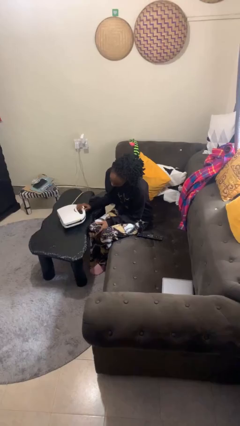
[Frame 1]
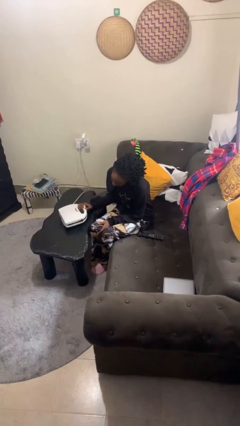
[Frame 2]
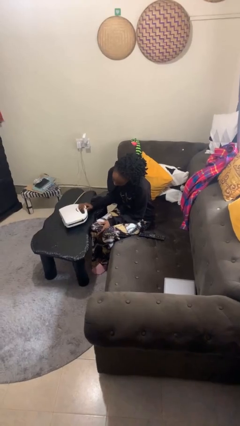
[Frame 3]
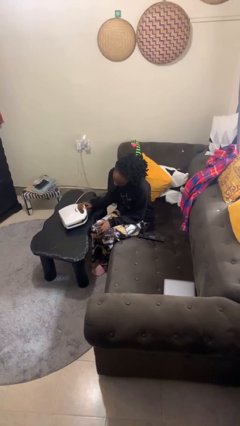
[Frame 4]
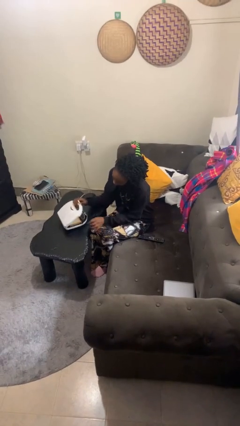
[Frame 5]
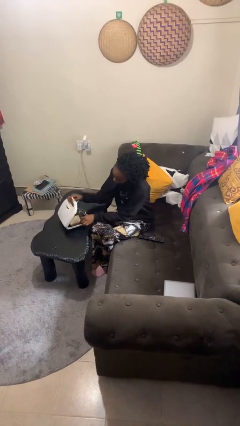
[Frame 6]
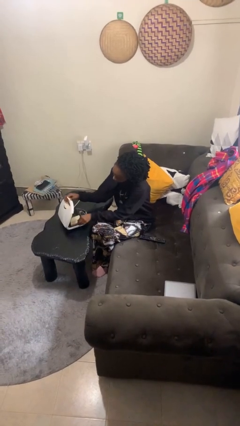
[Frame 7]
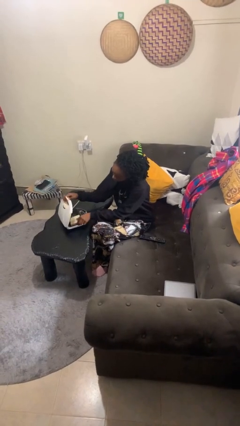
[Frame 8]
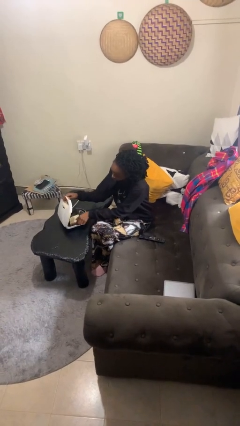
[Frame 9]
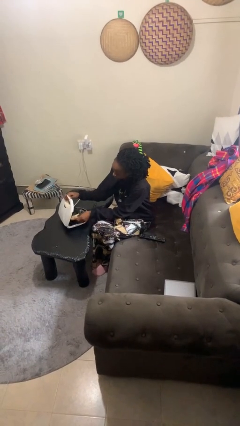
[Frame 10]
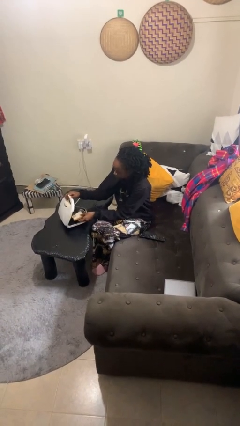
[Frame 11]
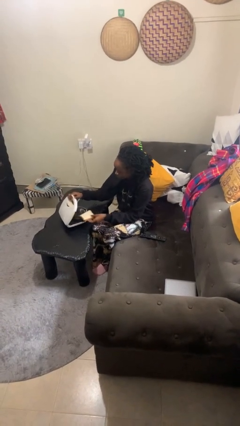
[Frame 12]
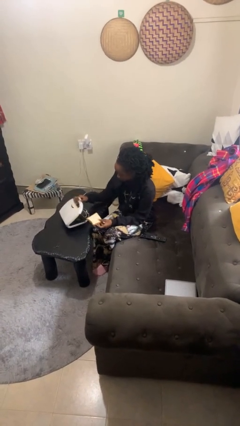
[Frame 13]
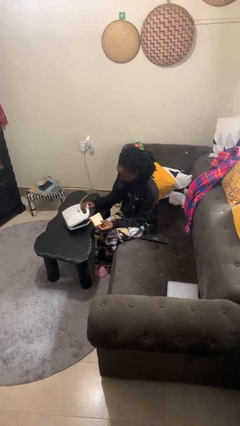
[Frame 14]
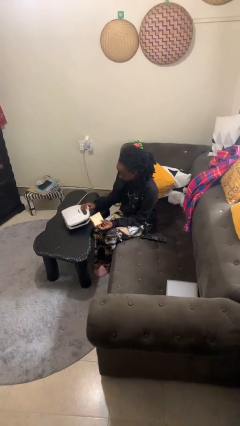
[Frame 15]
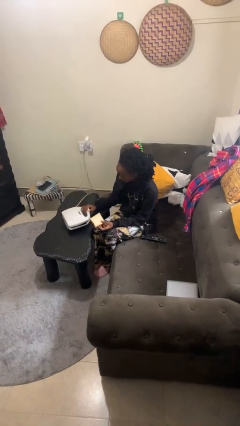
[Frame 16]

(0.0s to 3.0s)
person takes object from toaster

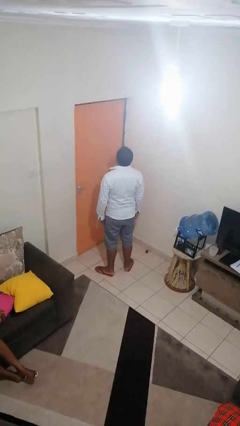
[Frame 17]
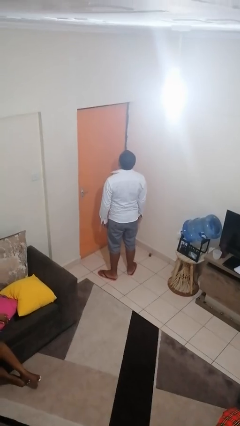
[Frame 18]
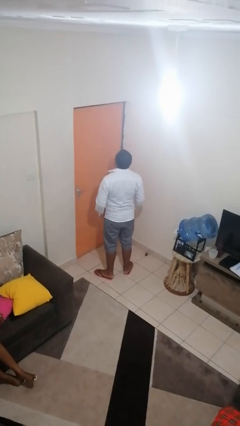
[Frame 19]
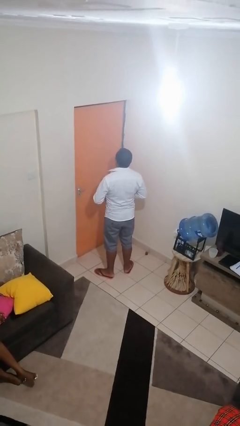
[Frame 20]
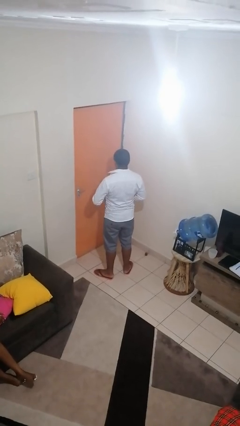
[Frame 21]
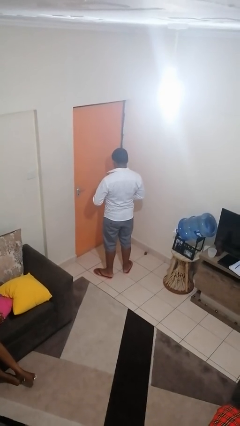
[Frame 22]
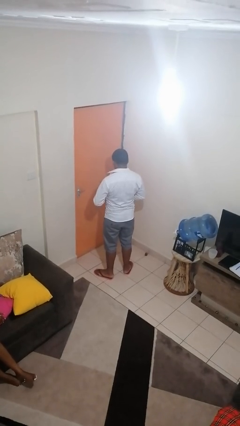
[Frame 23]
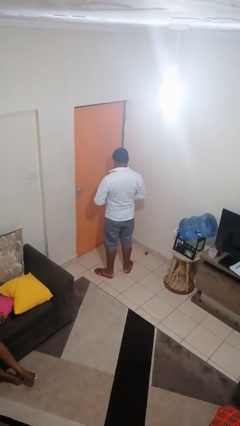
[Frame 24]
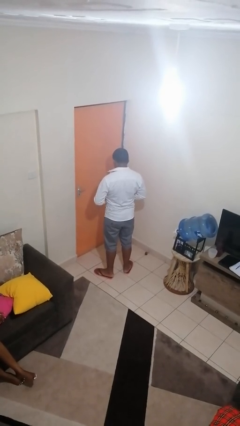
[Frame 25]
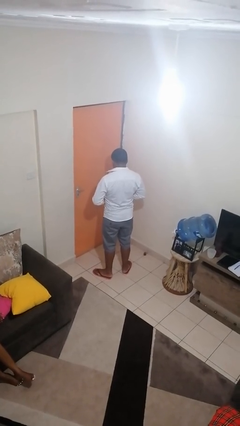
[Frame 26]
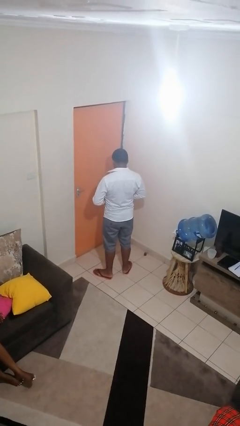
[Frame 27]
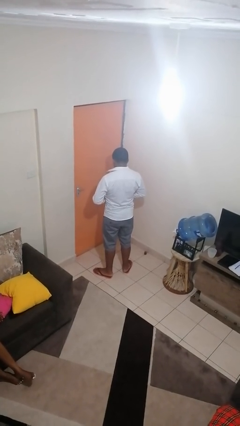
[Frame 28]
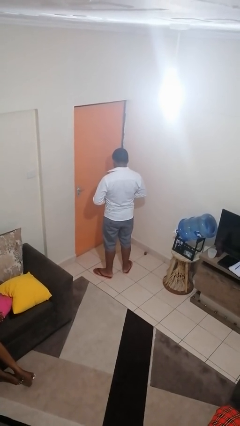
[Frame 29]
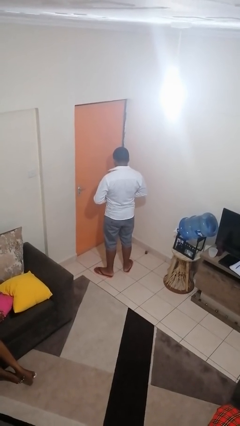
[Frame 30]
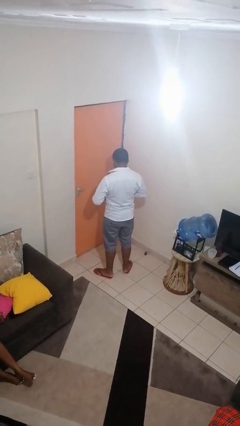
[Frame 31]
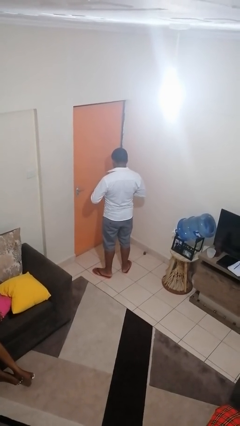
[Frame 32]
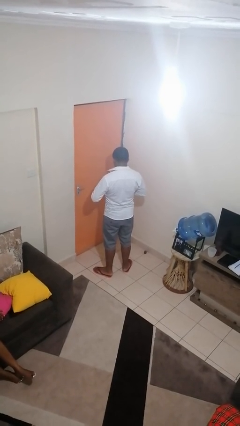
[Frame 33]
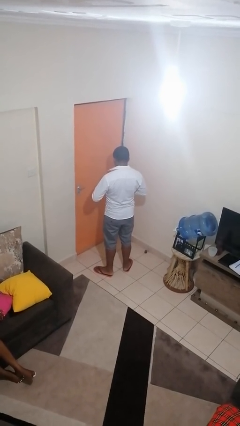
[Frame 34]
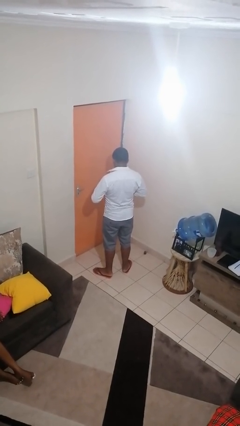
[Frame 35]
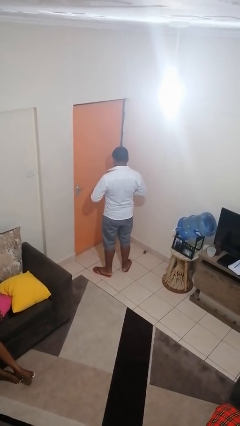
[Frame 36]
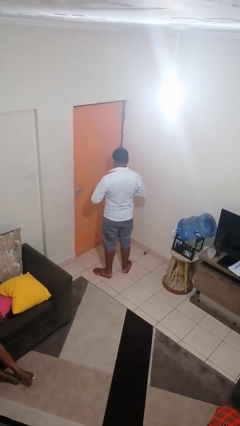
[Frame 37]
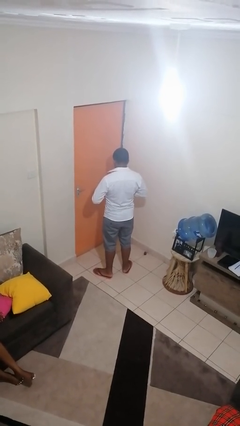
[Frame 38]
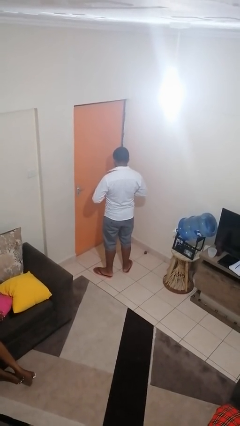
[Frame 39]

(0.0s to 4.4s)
person buttons shirt

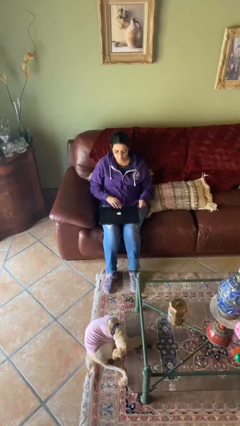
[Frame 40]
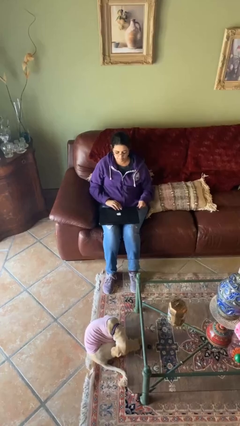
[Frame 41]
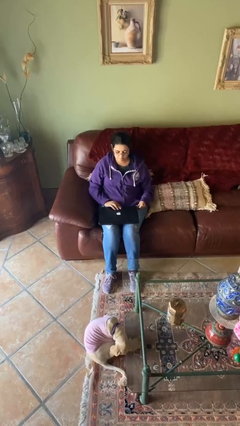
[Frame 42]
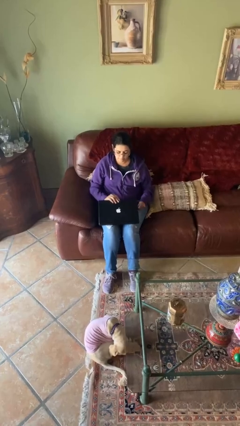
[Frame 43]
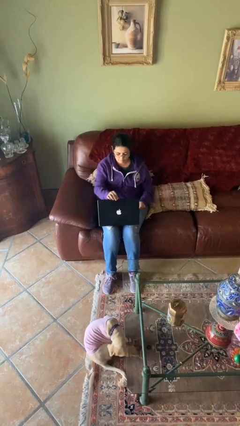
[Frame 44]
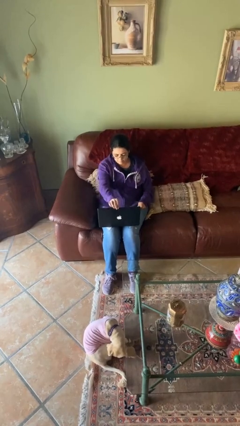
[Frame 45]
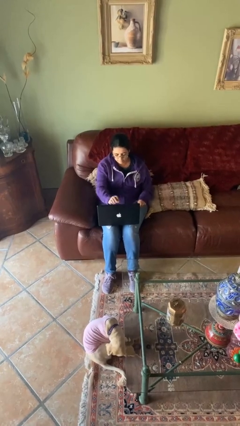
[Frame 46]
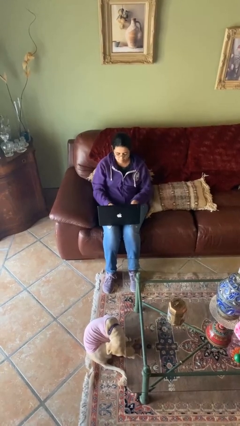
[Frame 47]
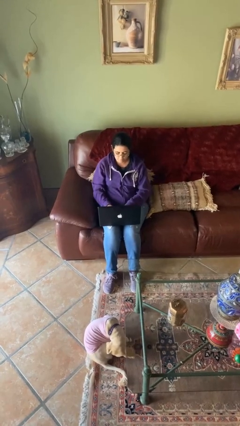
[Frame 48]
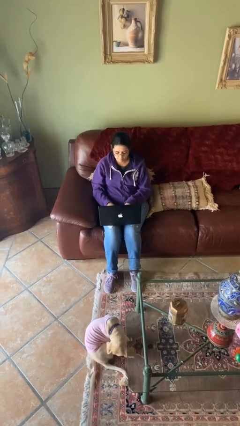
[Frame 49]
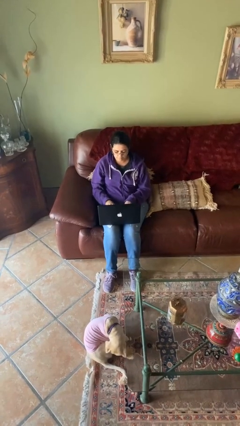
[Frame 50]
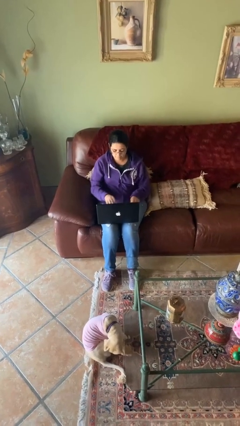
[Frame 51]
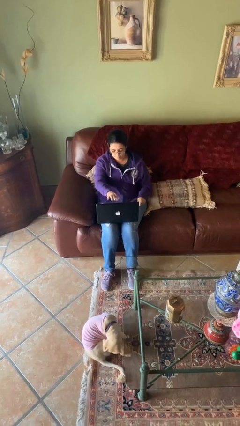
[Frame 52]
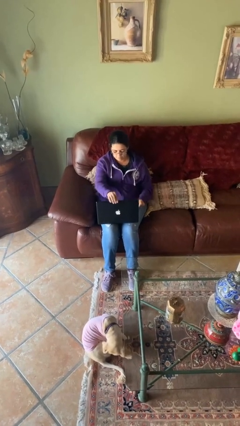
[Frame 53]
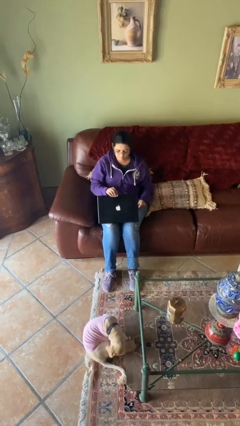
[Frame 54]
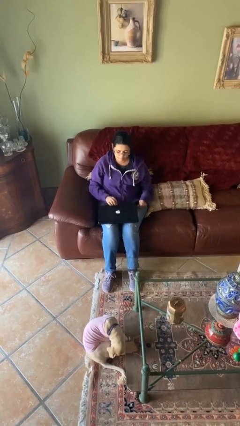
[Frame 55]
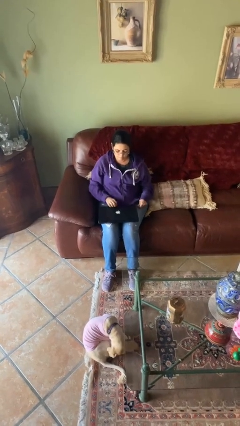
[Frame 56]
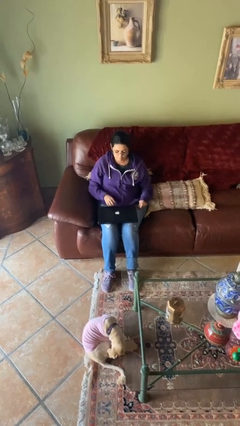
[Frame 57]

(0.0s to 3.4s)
person interacts with laptop

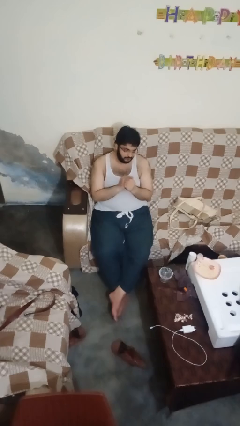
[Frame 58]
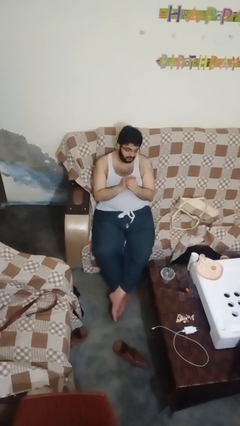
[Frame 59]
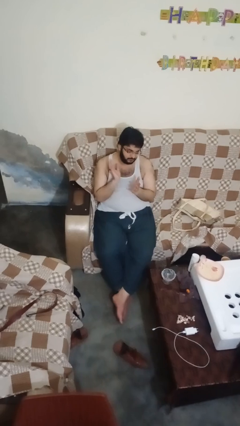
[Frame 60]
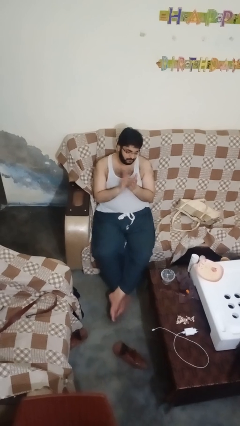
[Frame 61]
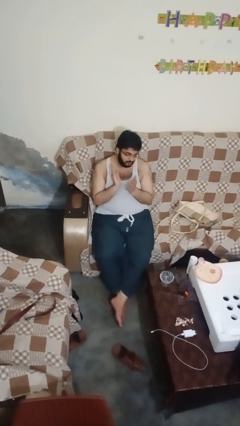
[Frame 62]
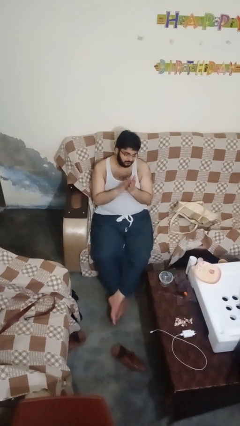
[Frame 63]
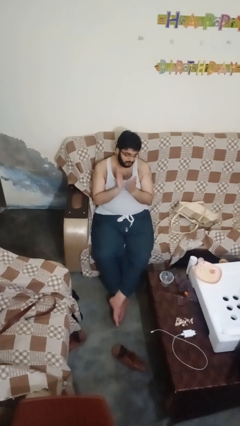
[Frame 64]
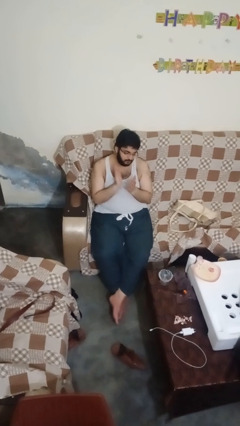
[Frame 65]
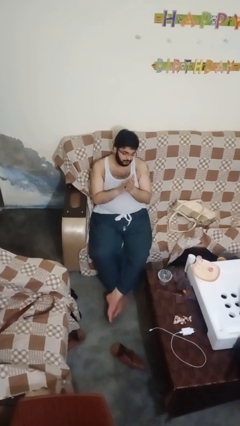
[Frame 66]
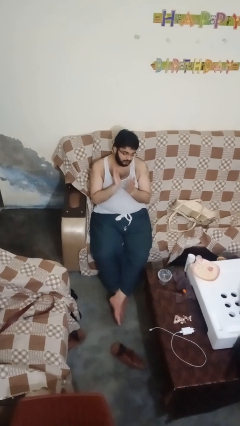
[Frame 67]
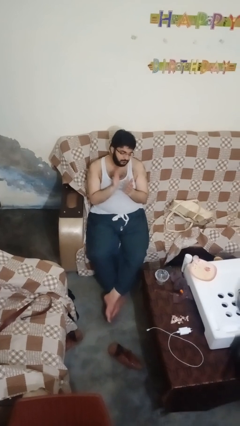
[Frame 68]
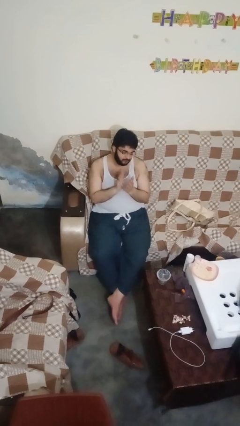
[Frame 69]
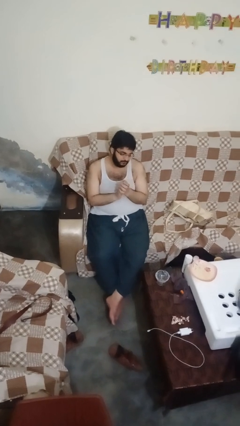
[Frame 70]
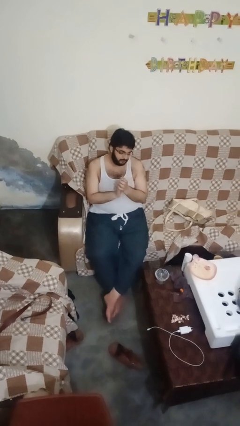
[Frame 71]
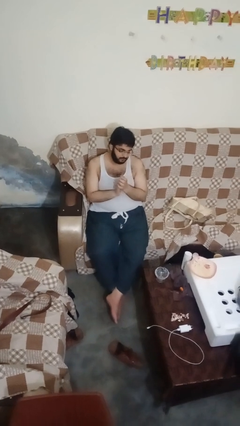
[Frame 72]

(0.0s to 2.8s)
person claps hands

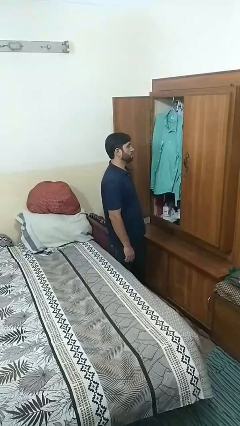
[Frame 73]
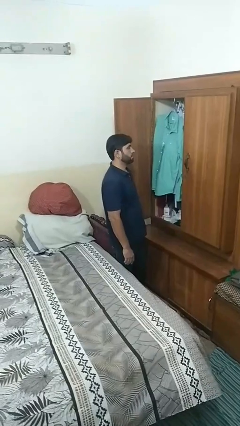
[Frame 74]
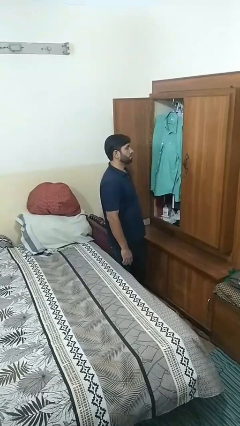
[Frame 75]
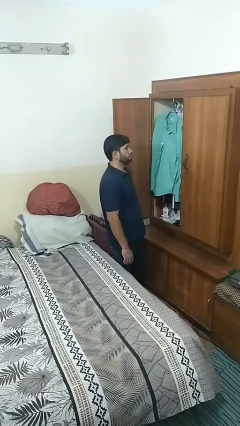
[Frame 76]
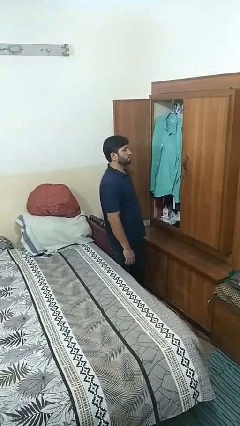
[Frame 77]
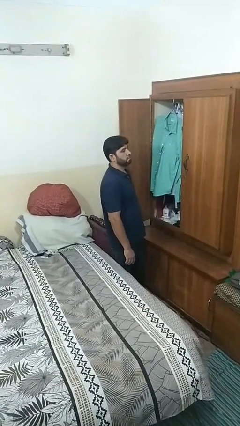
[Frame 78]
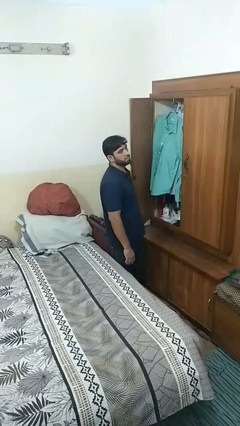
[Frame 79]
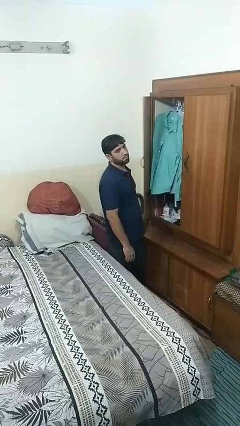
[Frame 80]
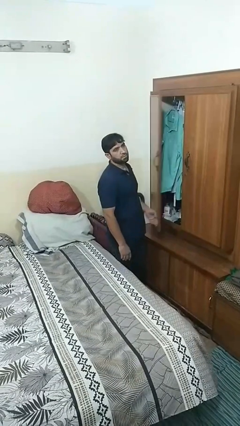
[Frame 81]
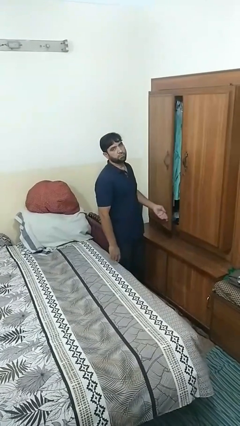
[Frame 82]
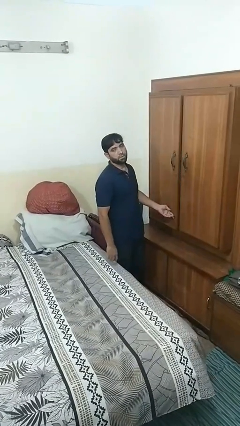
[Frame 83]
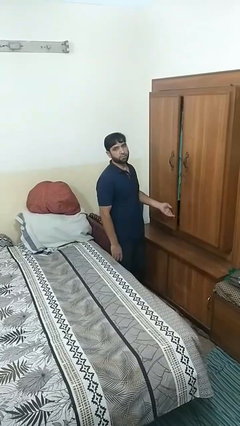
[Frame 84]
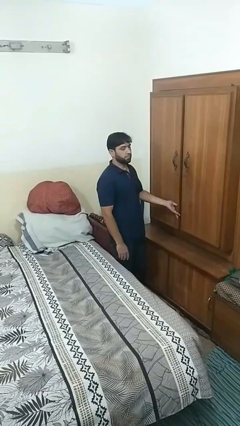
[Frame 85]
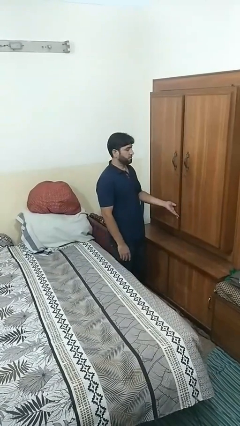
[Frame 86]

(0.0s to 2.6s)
person closes closet door

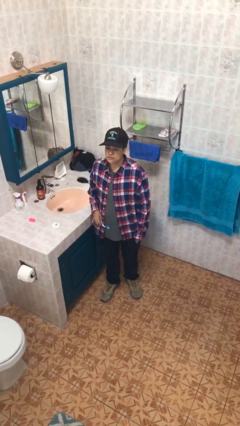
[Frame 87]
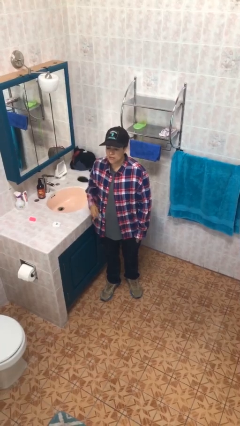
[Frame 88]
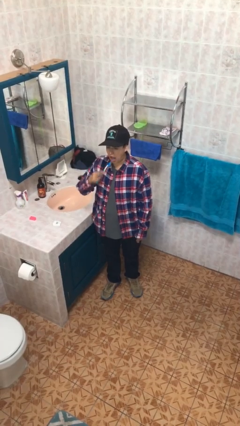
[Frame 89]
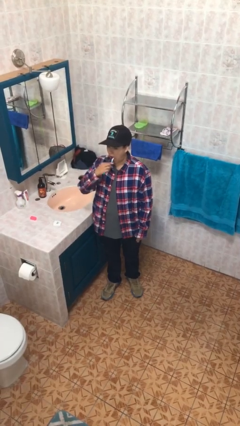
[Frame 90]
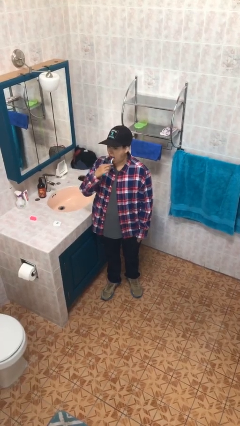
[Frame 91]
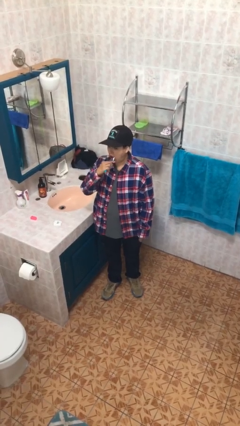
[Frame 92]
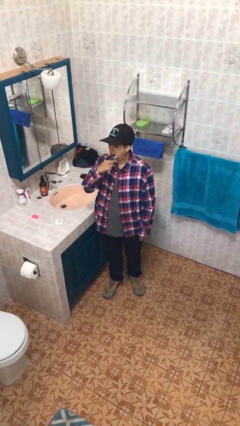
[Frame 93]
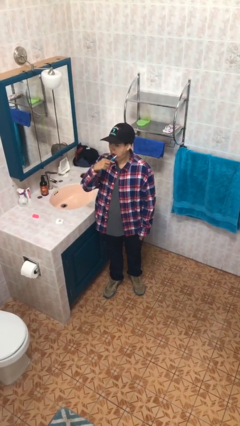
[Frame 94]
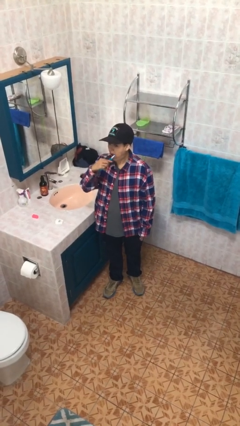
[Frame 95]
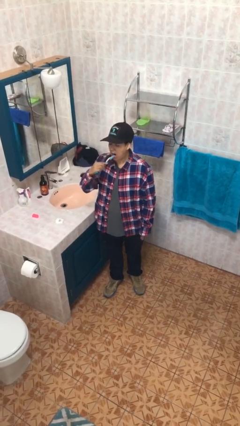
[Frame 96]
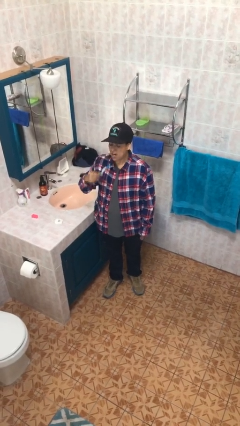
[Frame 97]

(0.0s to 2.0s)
person brushes teeth
